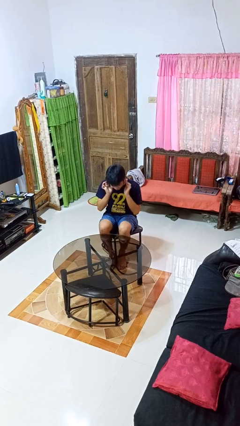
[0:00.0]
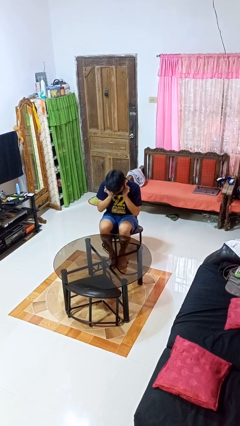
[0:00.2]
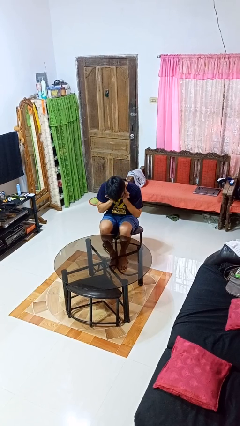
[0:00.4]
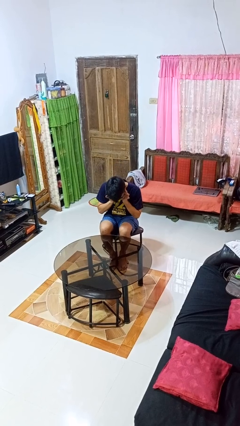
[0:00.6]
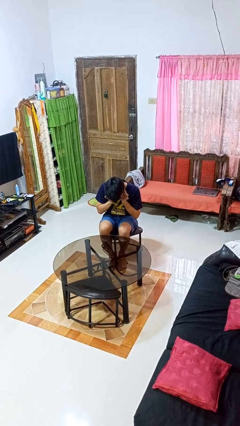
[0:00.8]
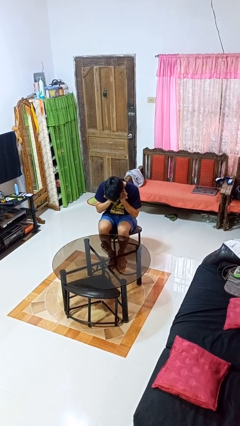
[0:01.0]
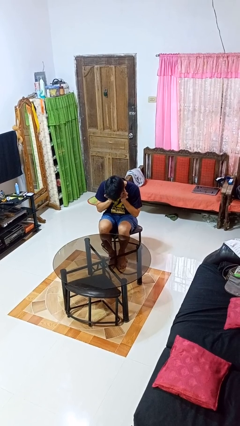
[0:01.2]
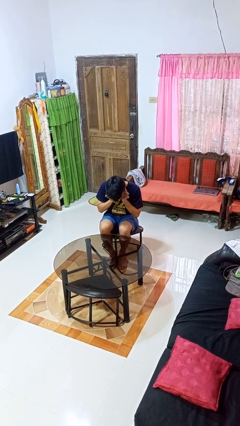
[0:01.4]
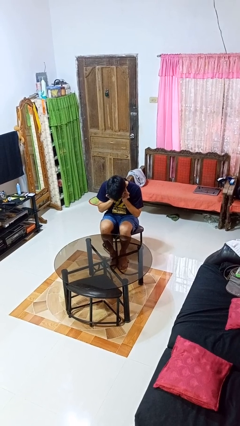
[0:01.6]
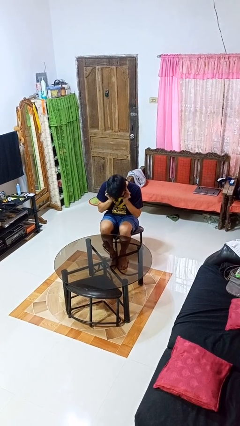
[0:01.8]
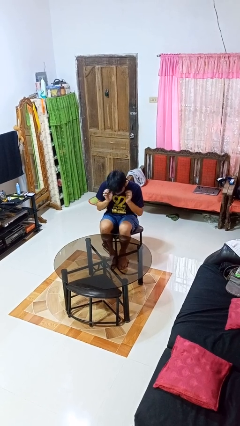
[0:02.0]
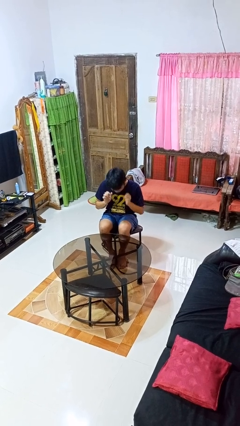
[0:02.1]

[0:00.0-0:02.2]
person puts fingers in ear

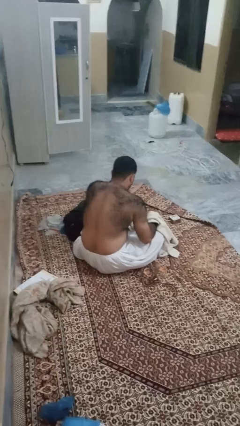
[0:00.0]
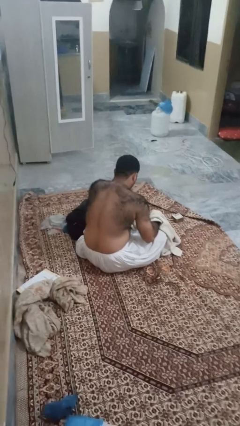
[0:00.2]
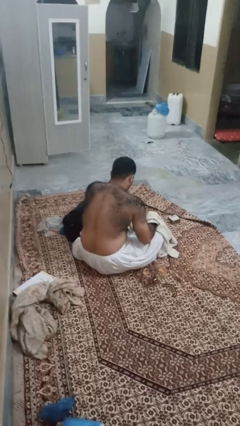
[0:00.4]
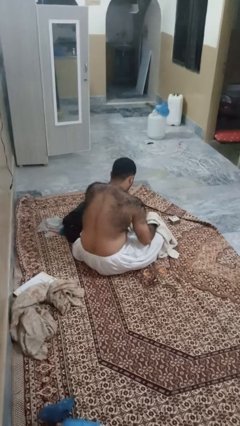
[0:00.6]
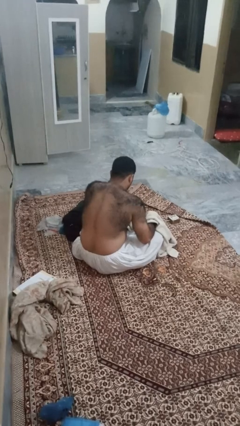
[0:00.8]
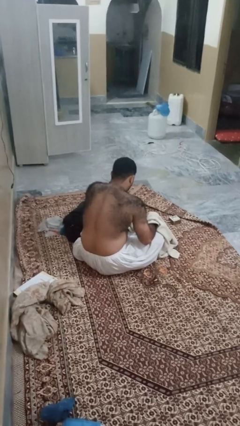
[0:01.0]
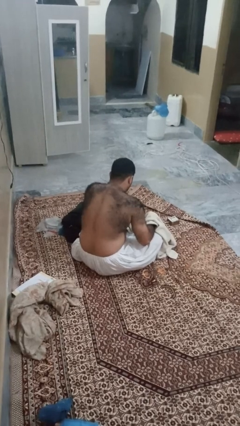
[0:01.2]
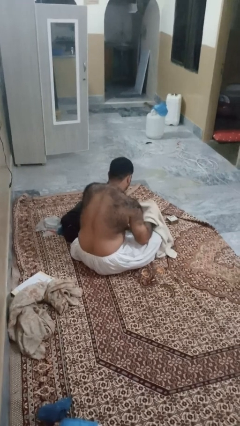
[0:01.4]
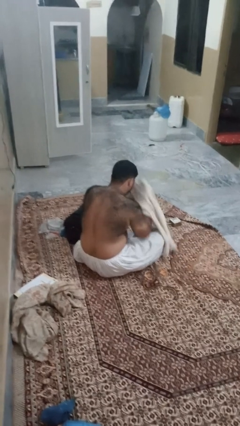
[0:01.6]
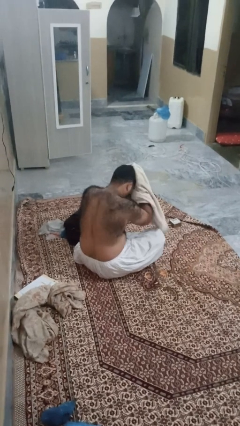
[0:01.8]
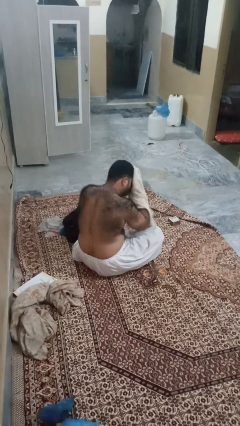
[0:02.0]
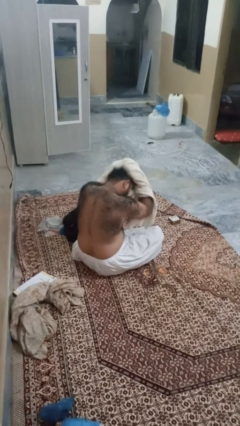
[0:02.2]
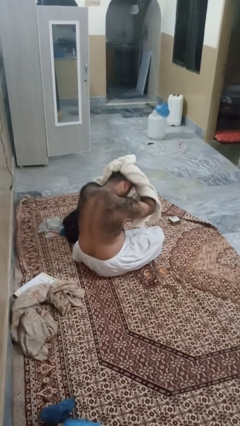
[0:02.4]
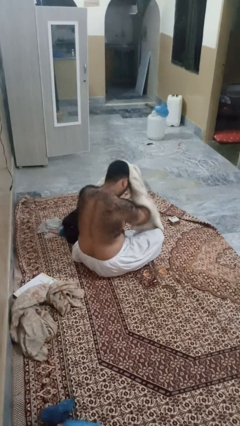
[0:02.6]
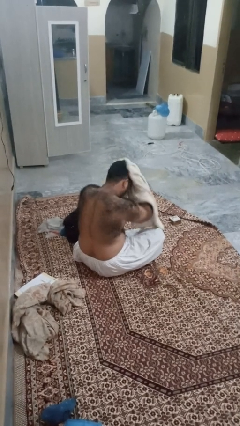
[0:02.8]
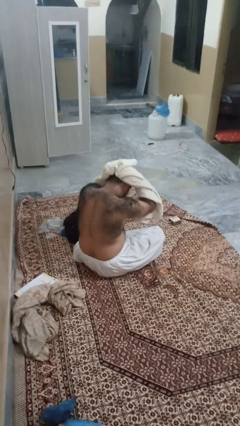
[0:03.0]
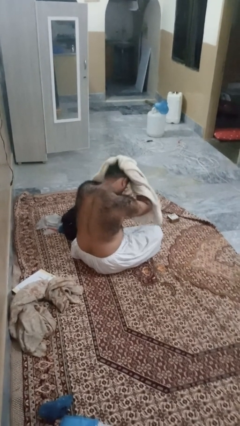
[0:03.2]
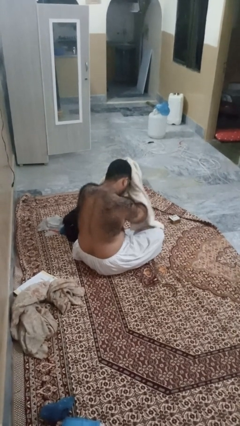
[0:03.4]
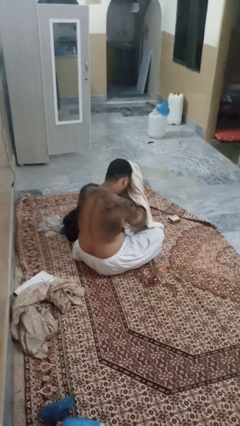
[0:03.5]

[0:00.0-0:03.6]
person dries hair with towel

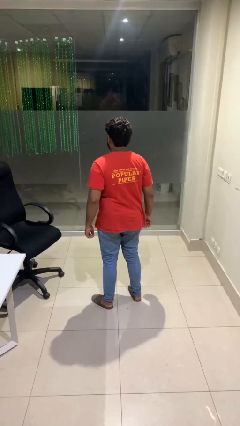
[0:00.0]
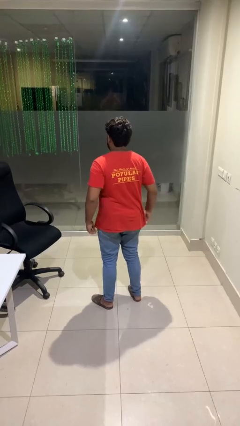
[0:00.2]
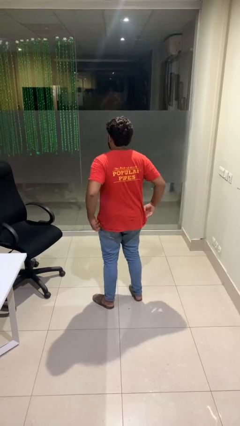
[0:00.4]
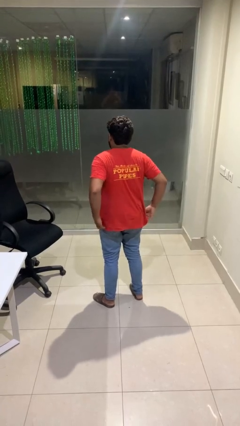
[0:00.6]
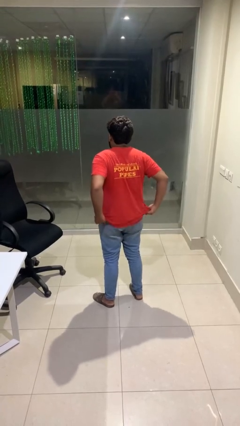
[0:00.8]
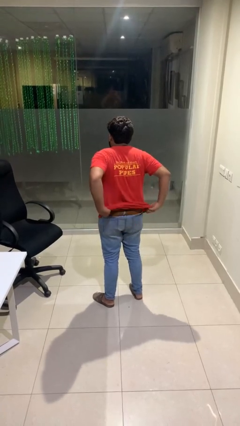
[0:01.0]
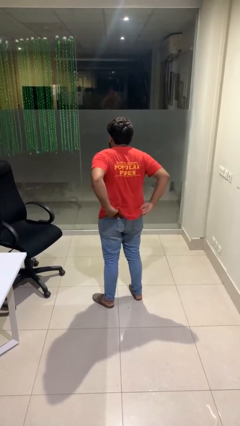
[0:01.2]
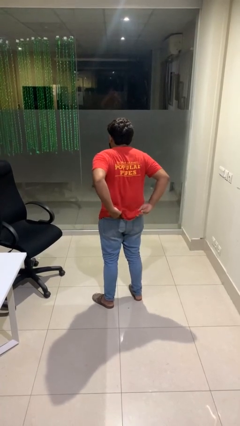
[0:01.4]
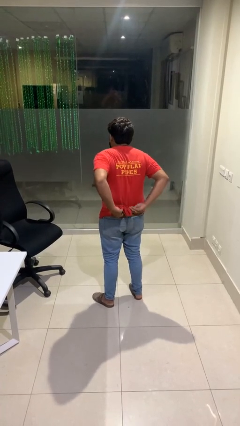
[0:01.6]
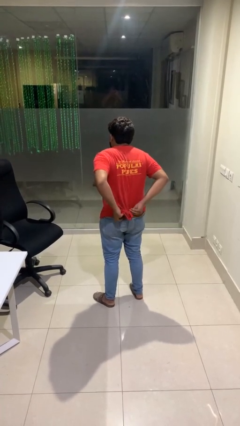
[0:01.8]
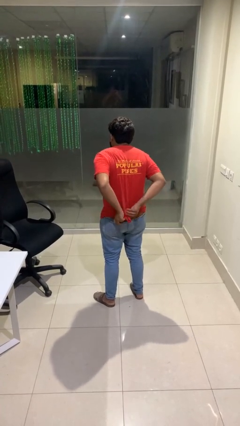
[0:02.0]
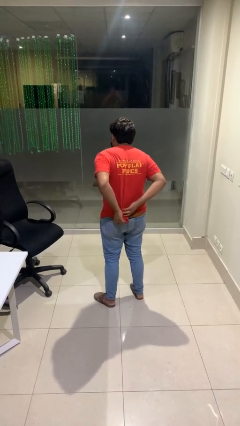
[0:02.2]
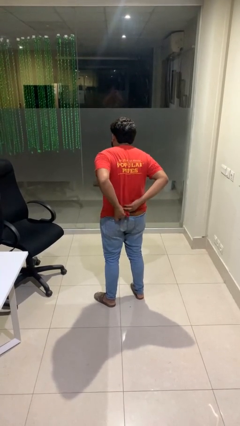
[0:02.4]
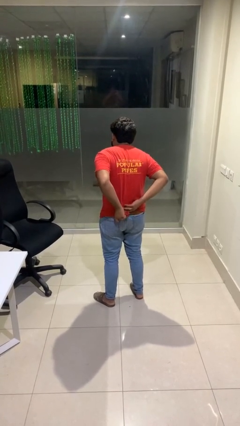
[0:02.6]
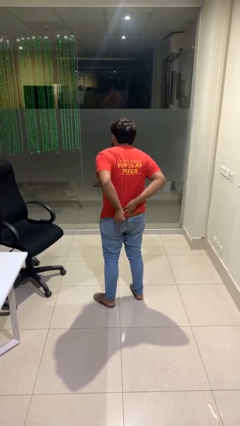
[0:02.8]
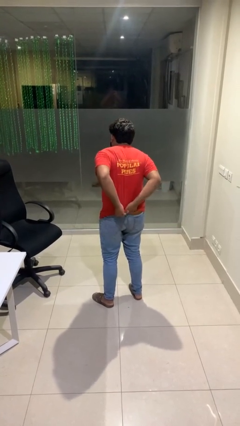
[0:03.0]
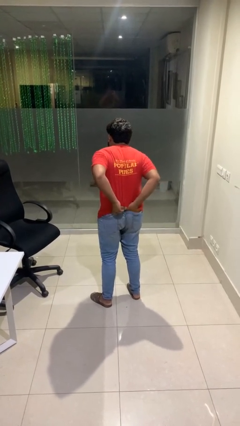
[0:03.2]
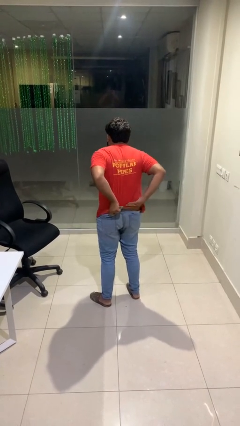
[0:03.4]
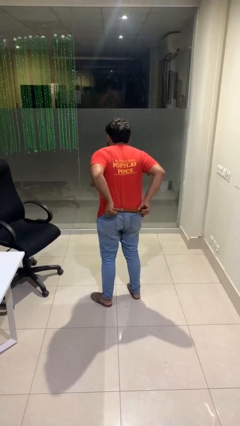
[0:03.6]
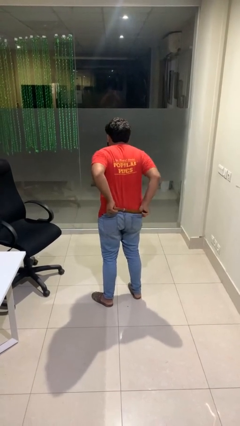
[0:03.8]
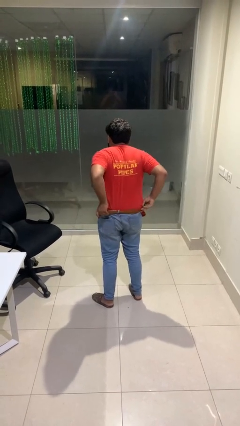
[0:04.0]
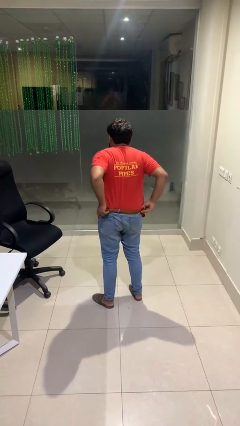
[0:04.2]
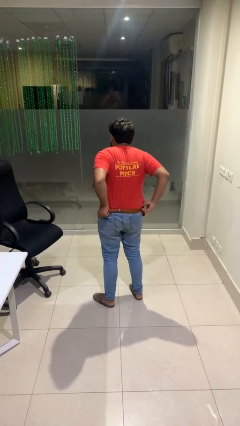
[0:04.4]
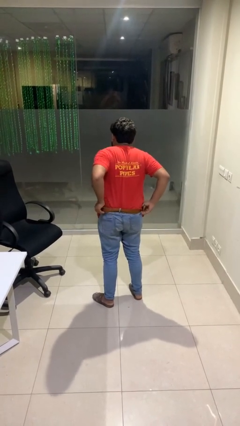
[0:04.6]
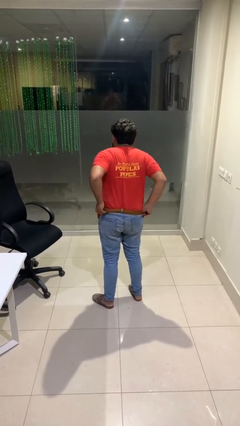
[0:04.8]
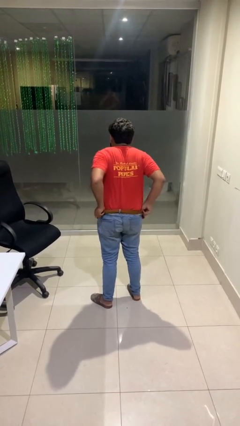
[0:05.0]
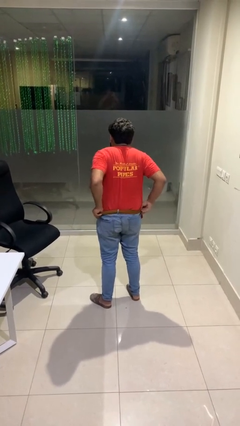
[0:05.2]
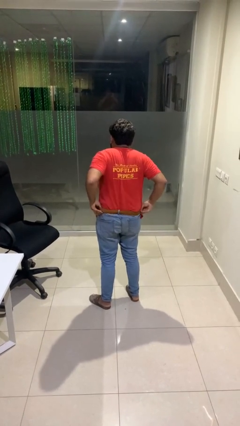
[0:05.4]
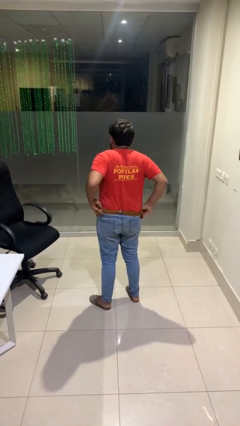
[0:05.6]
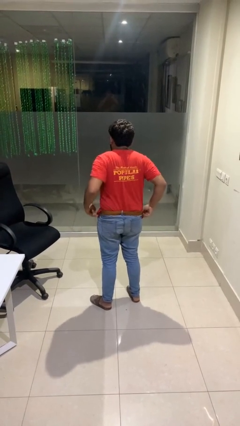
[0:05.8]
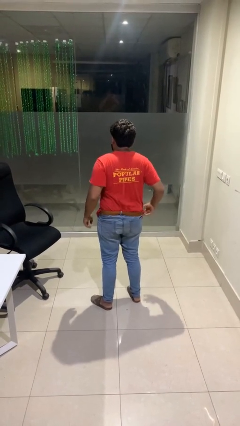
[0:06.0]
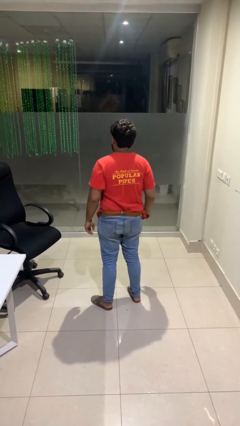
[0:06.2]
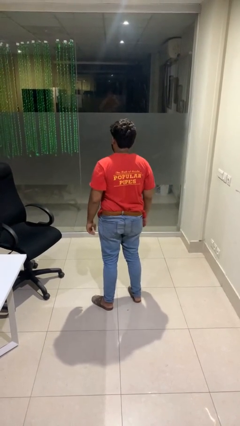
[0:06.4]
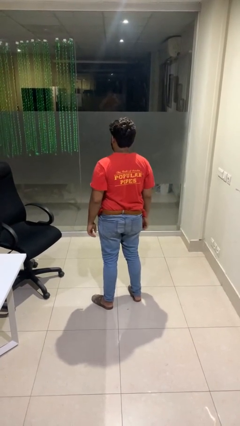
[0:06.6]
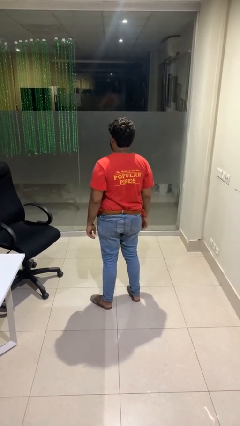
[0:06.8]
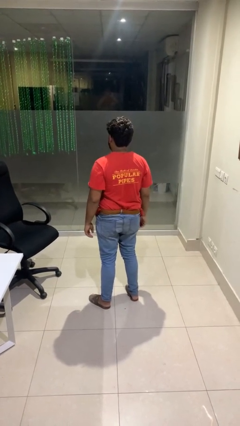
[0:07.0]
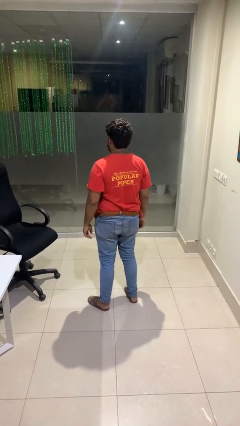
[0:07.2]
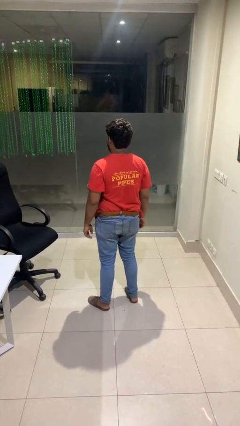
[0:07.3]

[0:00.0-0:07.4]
person tucks in shirt

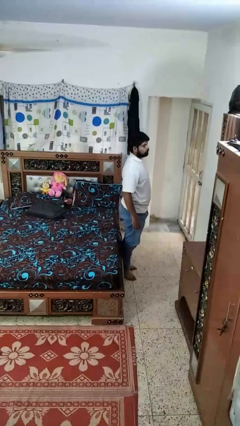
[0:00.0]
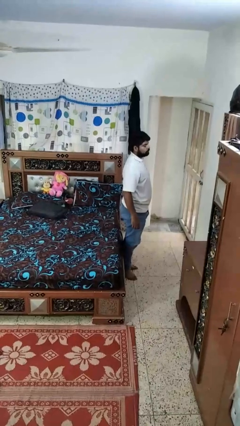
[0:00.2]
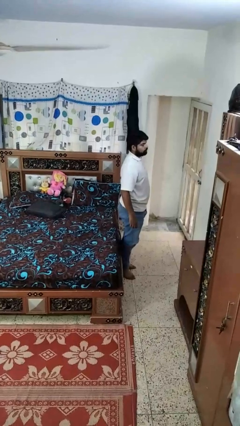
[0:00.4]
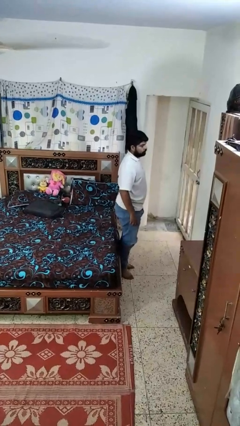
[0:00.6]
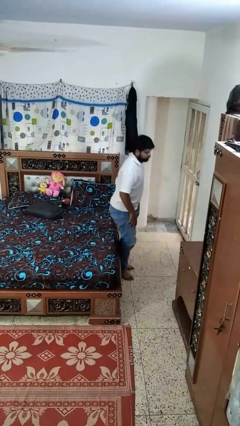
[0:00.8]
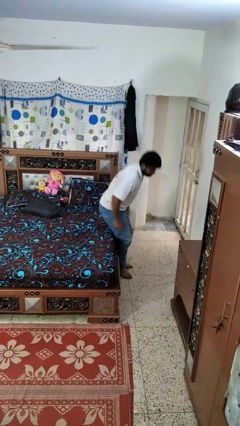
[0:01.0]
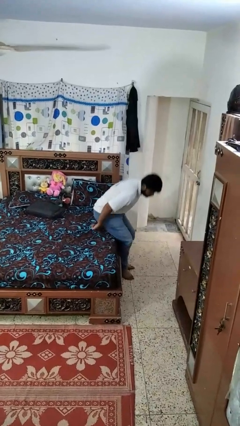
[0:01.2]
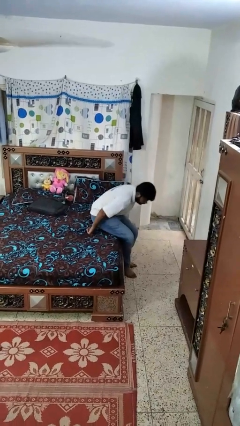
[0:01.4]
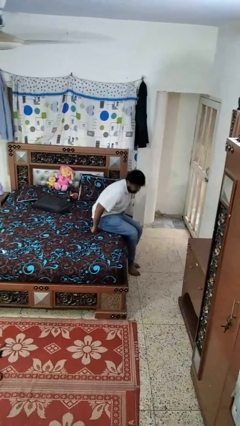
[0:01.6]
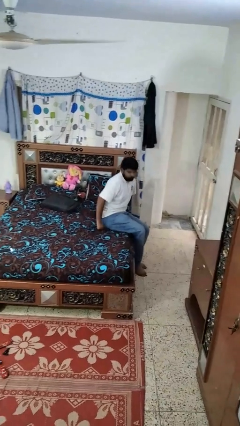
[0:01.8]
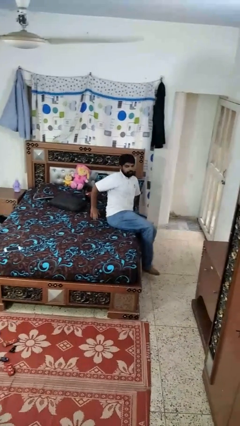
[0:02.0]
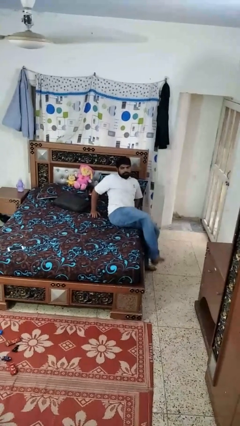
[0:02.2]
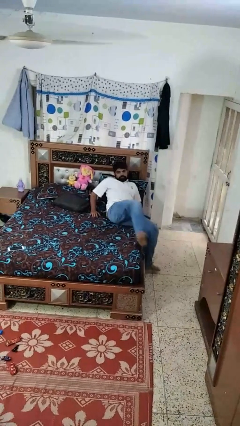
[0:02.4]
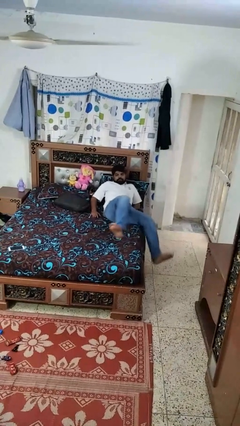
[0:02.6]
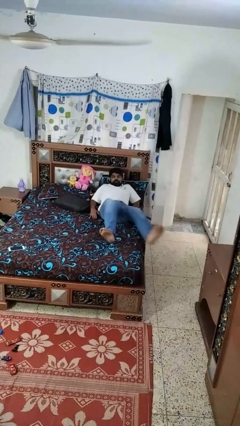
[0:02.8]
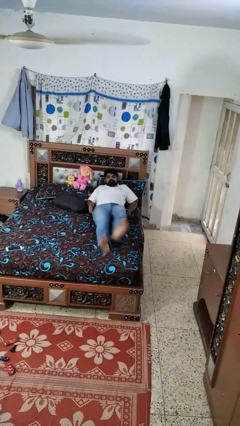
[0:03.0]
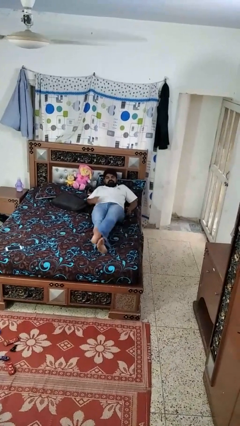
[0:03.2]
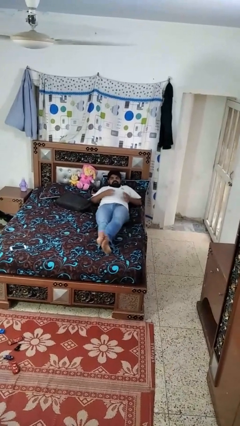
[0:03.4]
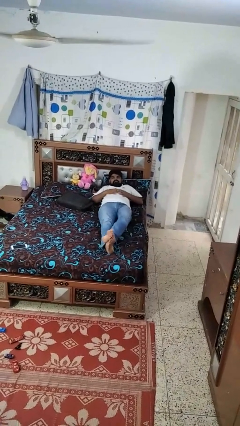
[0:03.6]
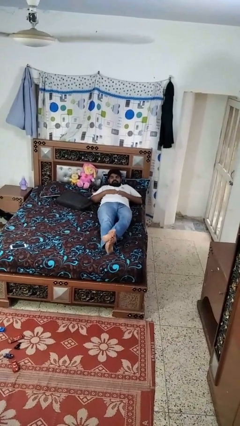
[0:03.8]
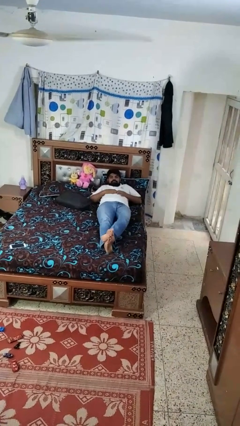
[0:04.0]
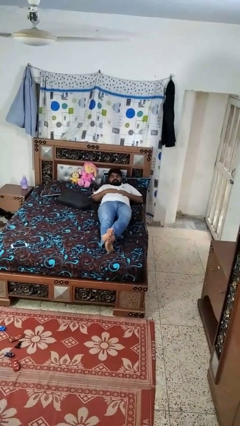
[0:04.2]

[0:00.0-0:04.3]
person lies down on bed

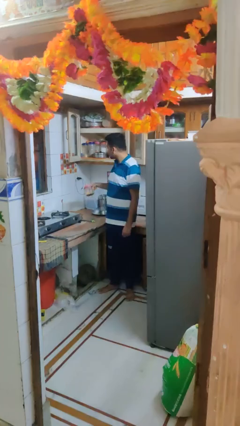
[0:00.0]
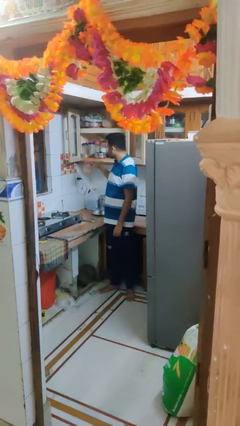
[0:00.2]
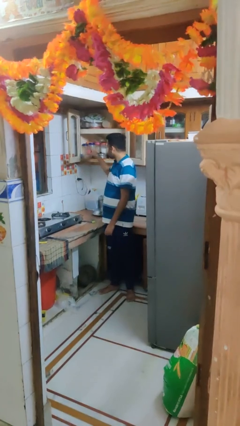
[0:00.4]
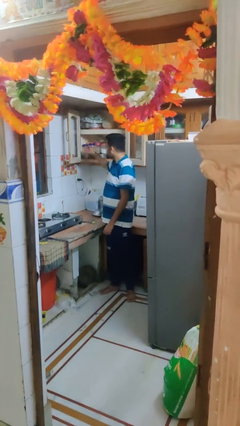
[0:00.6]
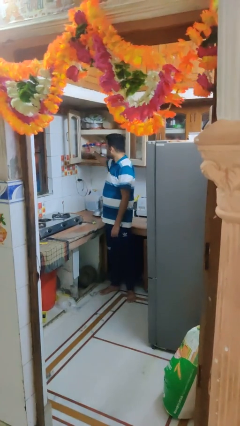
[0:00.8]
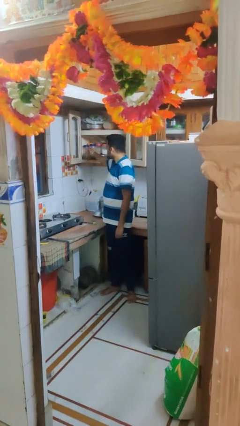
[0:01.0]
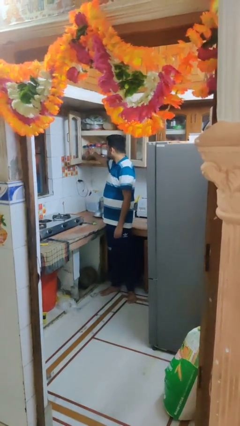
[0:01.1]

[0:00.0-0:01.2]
person puts object in cabinet
